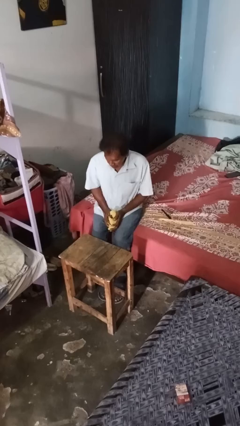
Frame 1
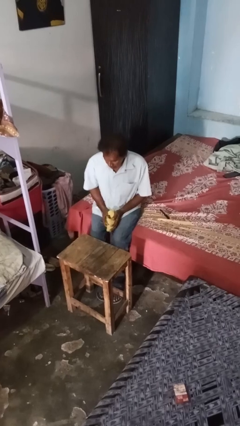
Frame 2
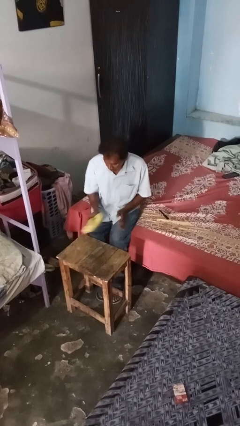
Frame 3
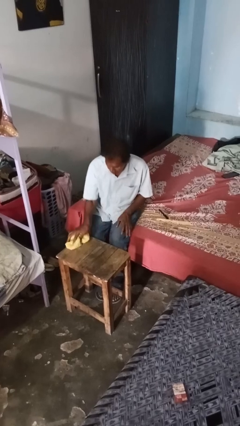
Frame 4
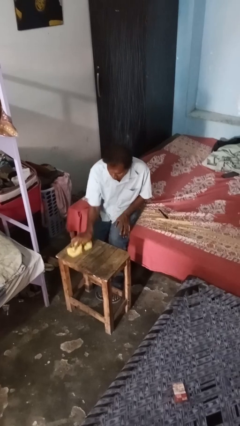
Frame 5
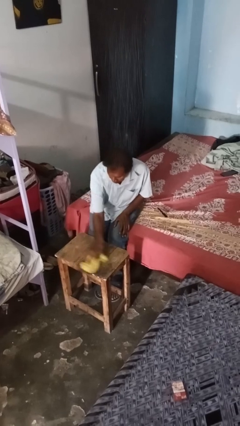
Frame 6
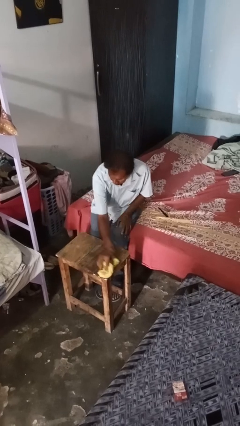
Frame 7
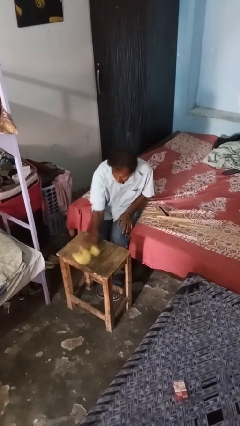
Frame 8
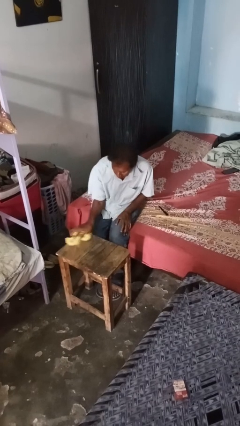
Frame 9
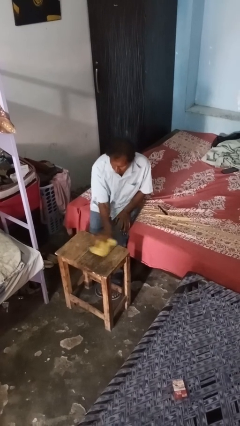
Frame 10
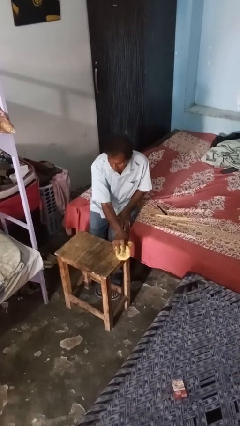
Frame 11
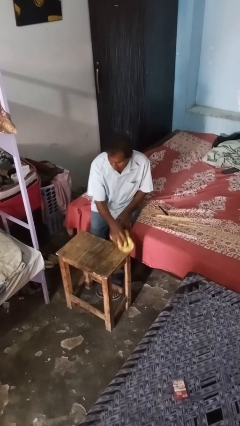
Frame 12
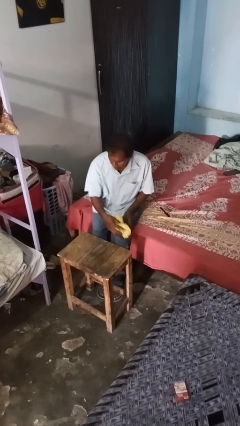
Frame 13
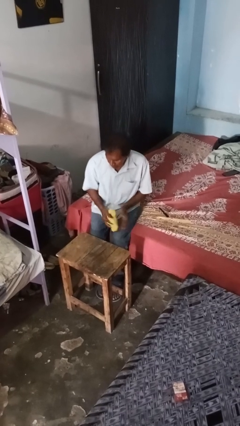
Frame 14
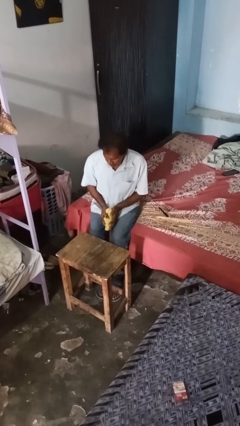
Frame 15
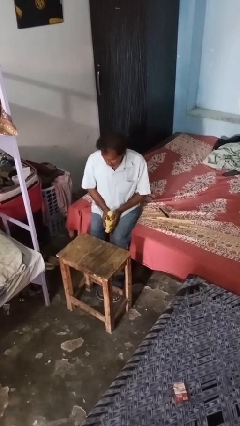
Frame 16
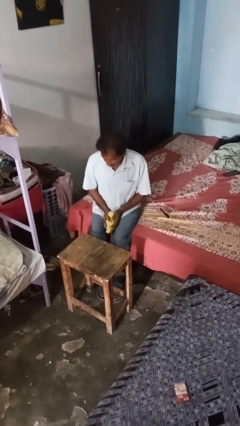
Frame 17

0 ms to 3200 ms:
person cleans table with rag

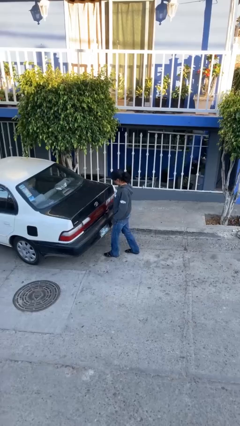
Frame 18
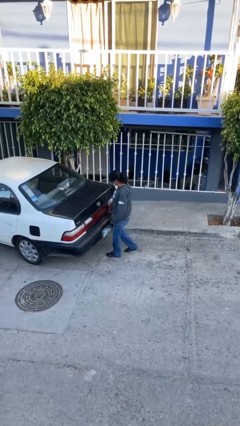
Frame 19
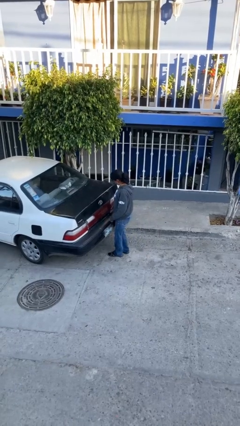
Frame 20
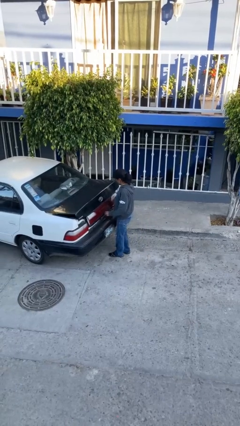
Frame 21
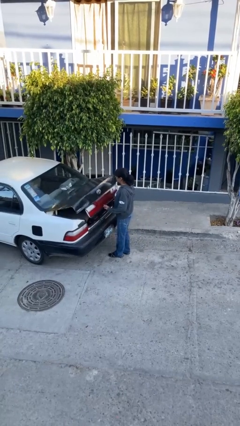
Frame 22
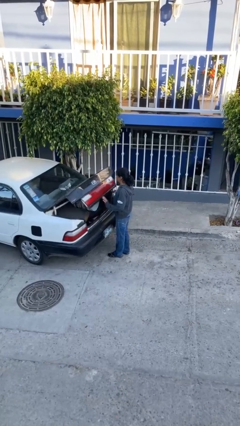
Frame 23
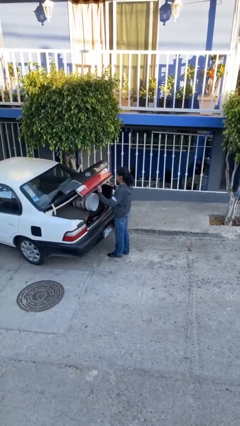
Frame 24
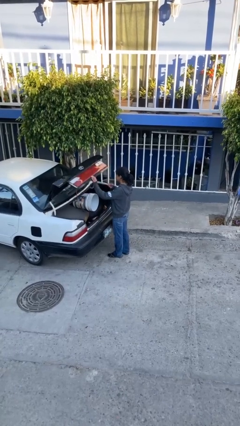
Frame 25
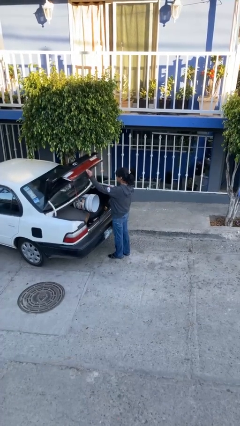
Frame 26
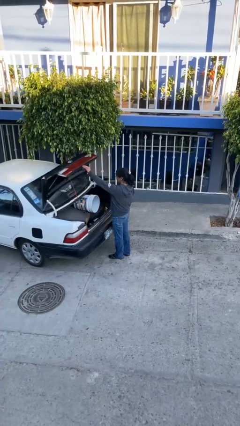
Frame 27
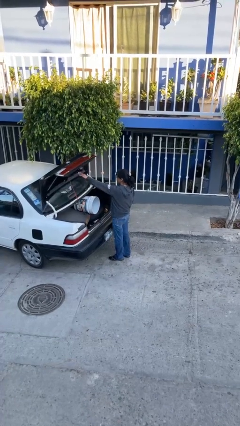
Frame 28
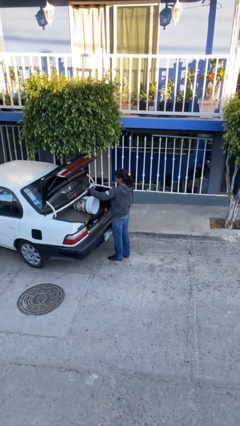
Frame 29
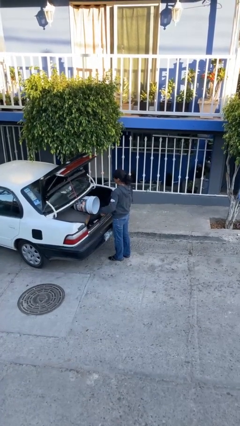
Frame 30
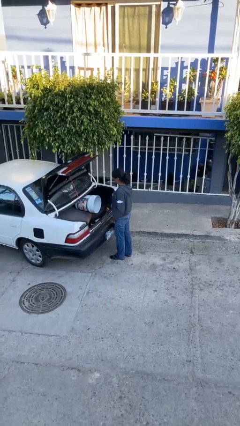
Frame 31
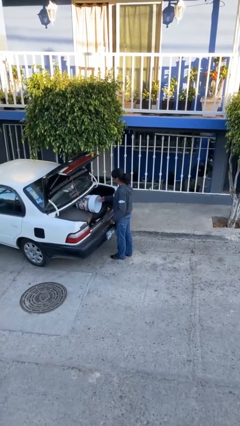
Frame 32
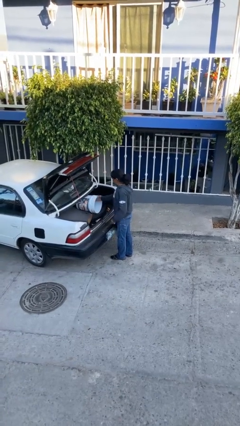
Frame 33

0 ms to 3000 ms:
person opens car trunk

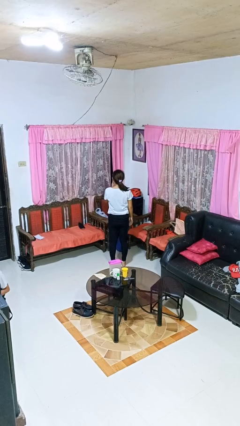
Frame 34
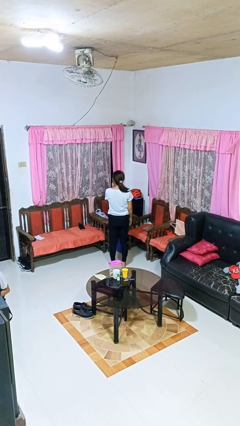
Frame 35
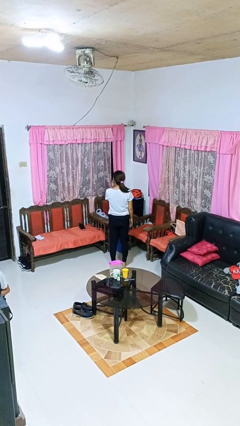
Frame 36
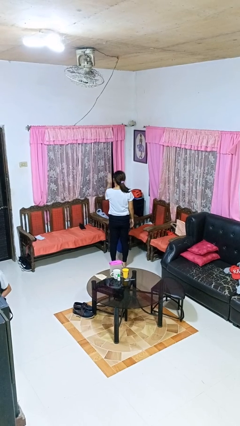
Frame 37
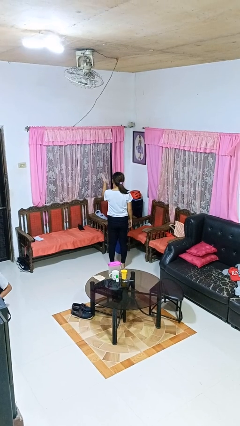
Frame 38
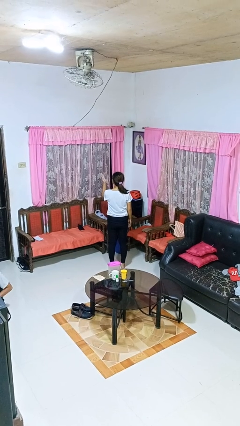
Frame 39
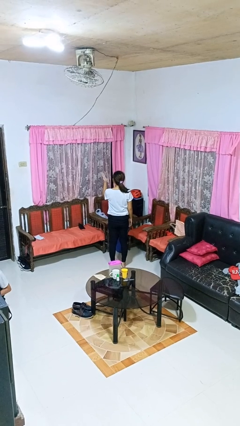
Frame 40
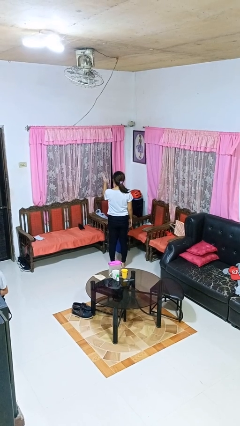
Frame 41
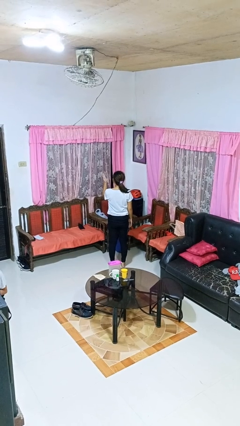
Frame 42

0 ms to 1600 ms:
person gestures blow kiss

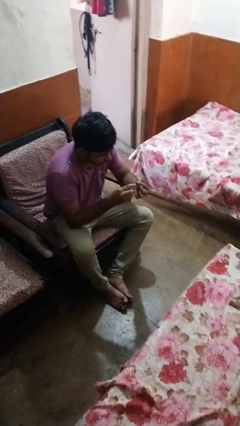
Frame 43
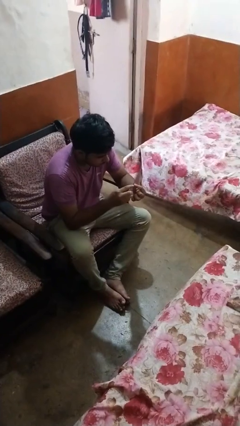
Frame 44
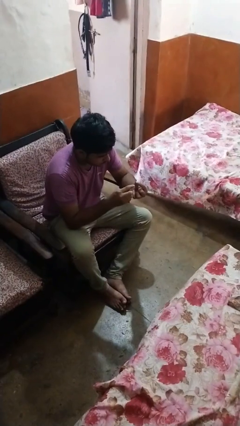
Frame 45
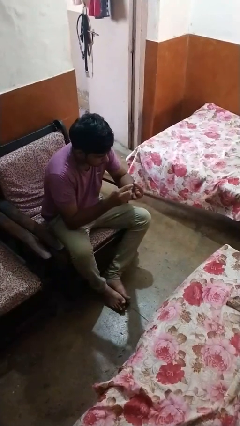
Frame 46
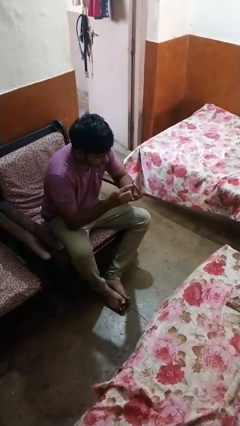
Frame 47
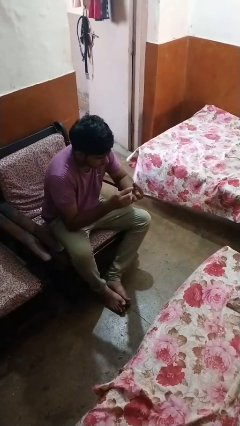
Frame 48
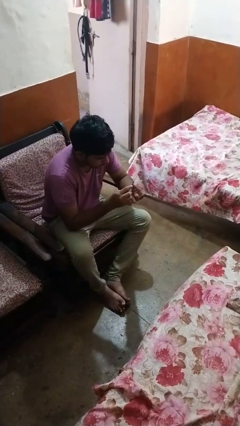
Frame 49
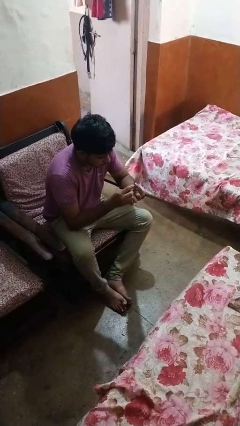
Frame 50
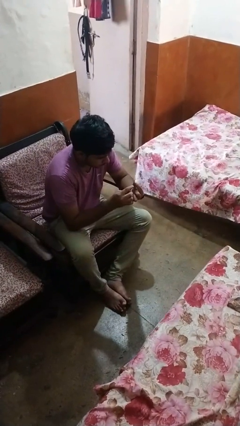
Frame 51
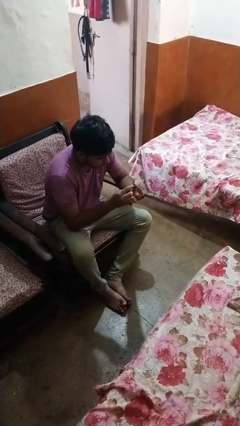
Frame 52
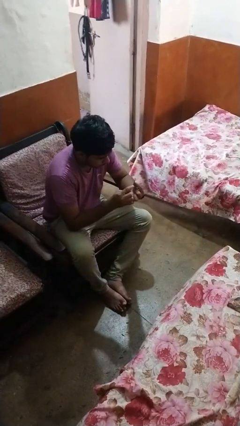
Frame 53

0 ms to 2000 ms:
person files fingernails

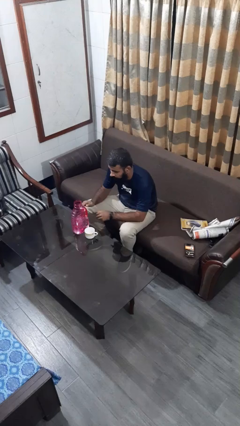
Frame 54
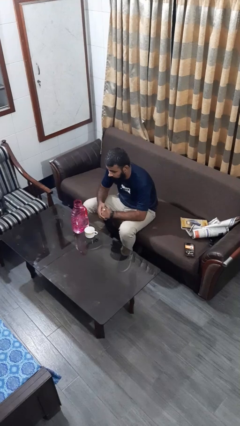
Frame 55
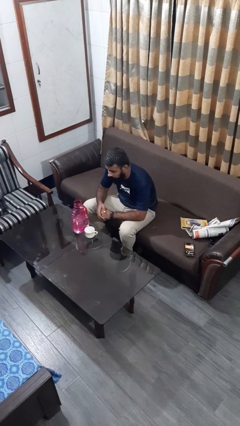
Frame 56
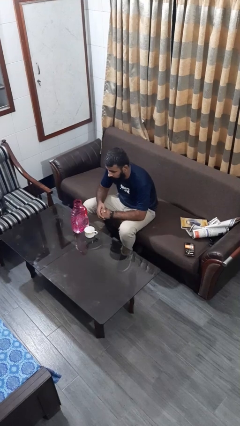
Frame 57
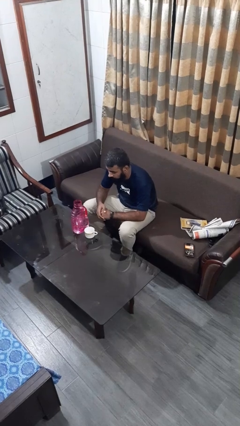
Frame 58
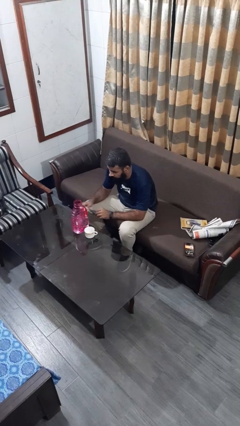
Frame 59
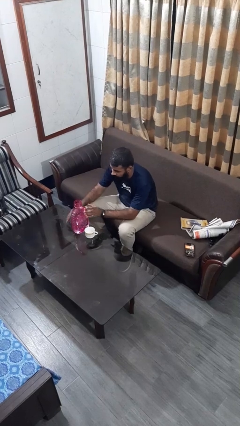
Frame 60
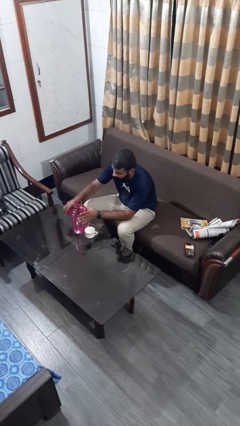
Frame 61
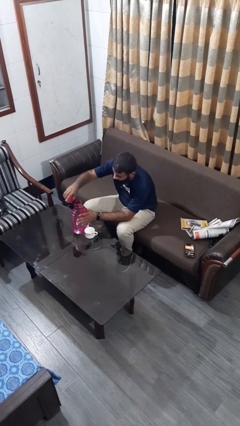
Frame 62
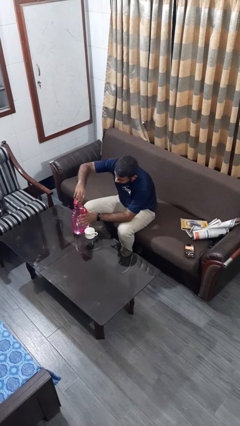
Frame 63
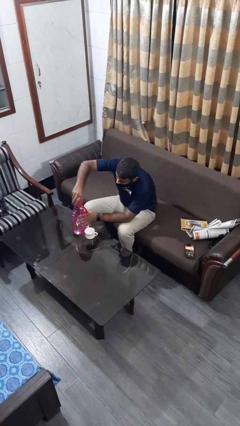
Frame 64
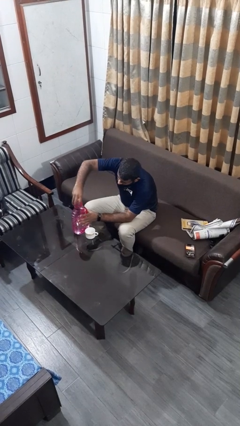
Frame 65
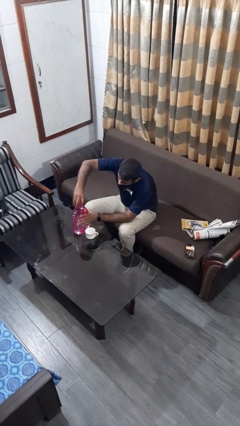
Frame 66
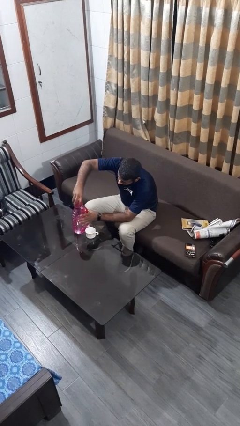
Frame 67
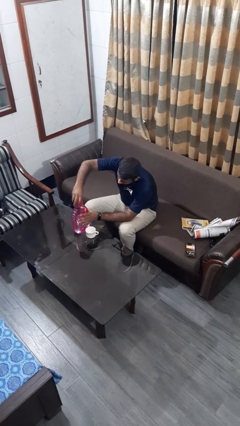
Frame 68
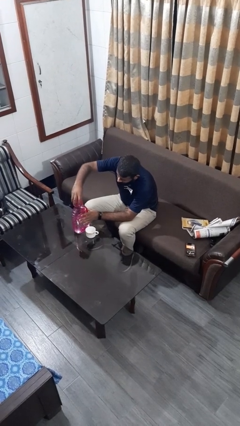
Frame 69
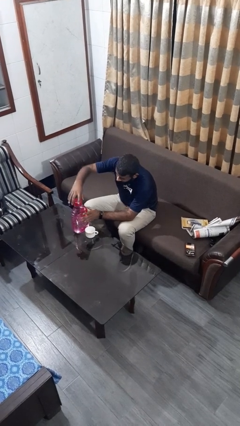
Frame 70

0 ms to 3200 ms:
person screws lid to bottle

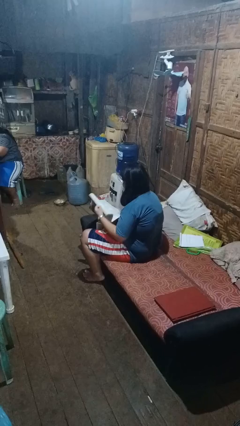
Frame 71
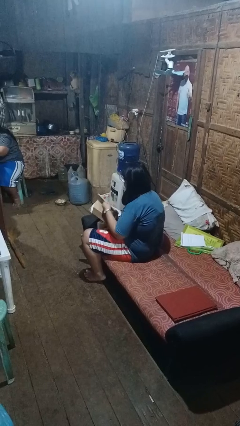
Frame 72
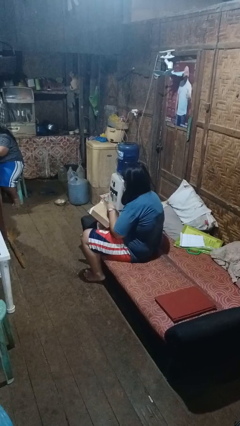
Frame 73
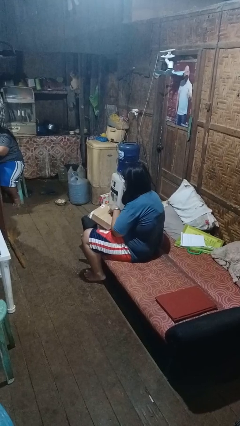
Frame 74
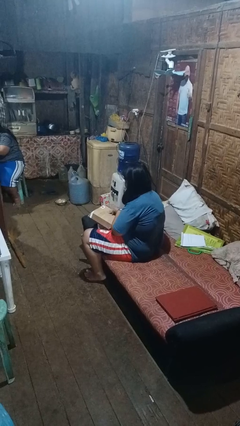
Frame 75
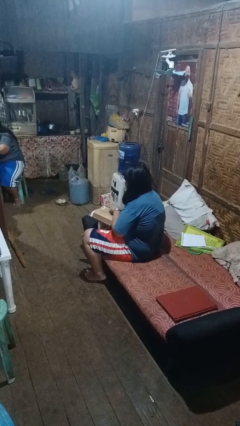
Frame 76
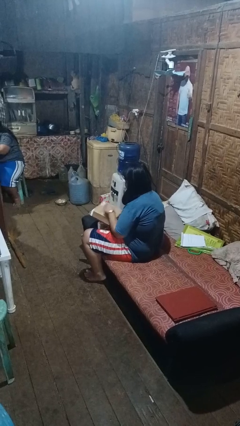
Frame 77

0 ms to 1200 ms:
person reads book

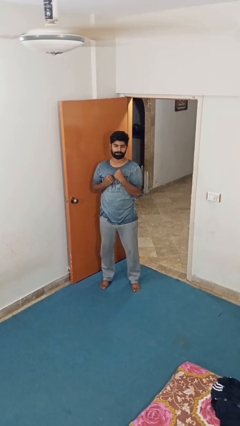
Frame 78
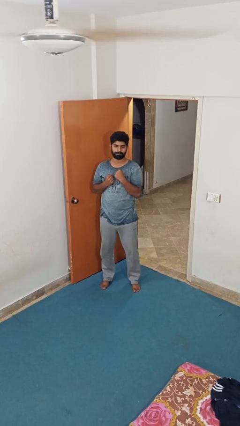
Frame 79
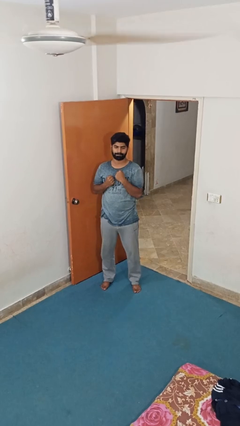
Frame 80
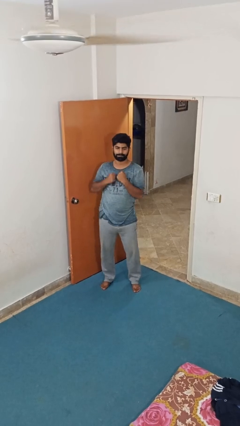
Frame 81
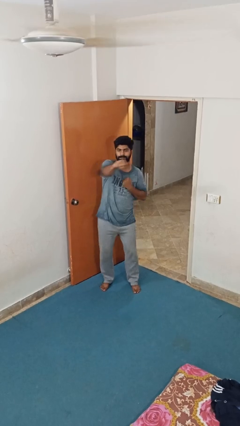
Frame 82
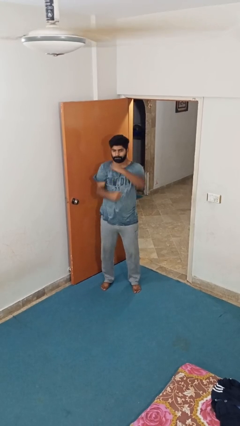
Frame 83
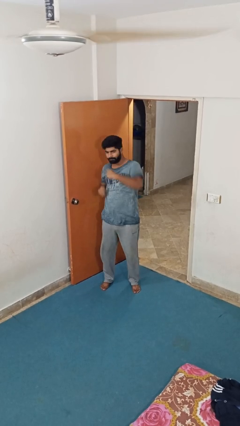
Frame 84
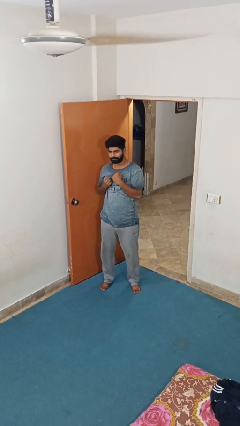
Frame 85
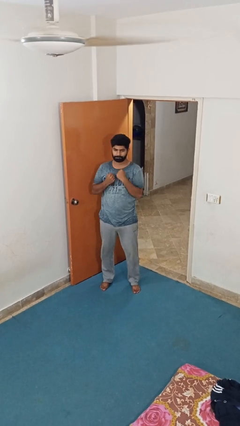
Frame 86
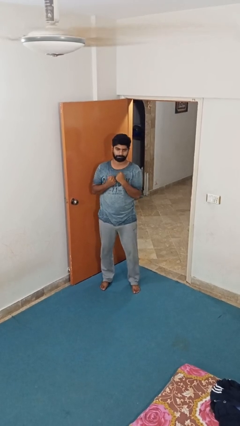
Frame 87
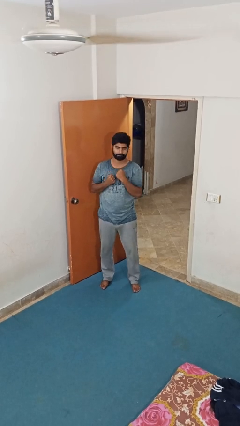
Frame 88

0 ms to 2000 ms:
person punches

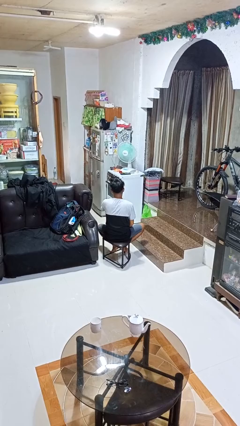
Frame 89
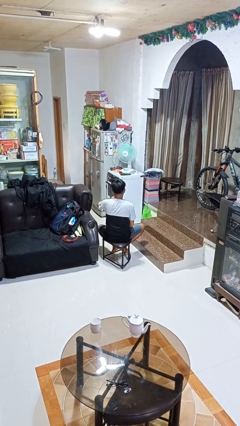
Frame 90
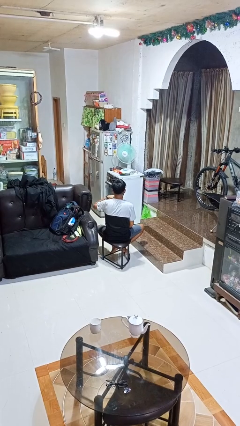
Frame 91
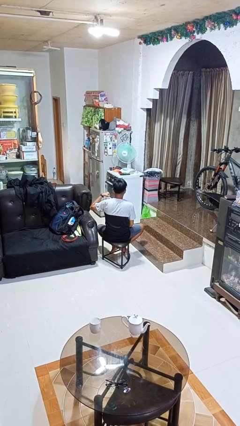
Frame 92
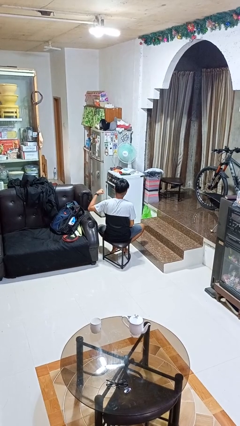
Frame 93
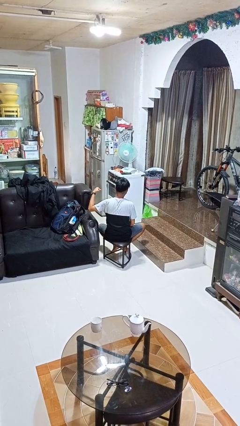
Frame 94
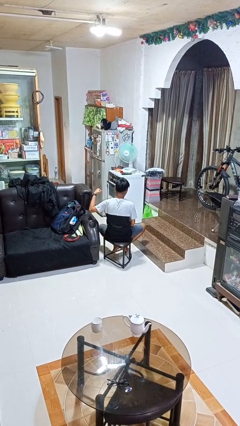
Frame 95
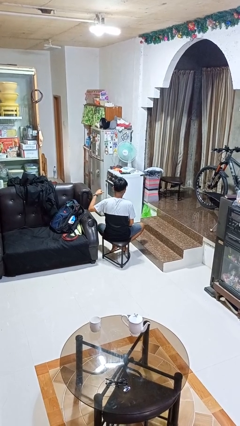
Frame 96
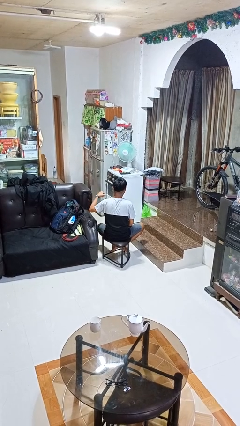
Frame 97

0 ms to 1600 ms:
person gestures cut
